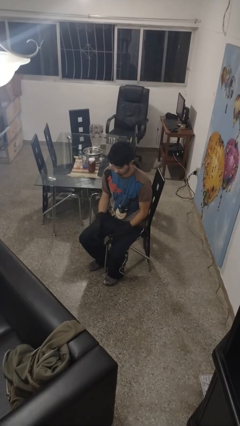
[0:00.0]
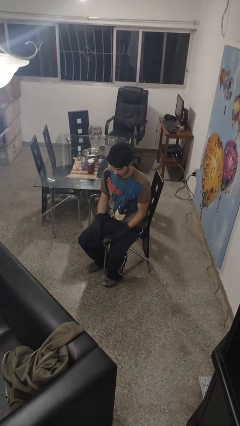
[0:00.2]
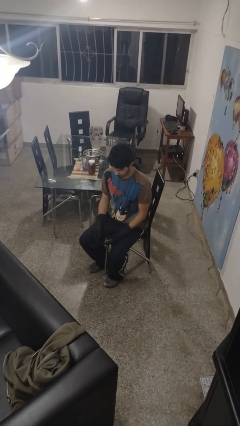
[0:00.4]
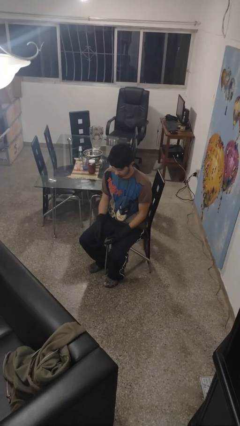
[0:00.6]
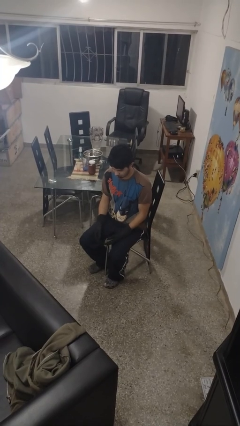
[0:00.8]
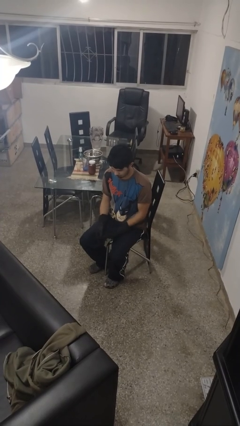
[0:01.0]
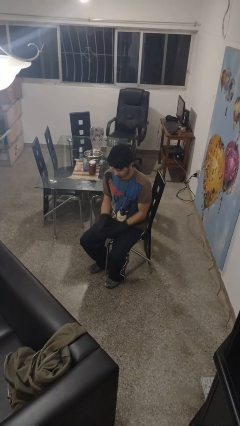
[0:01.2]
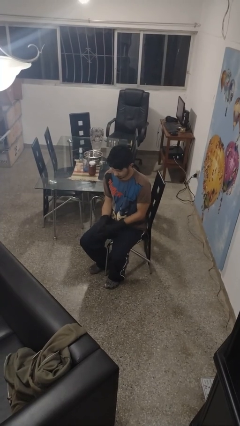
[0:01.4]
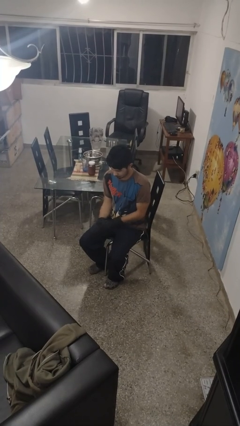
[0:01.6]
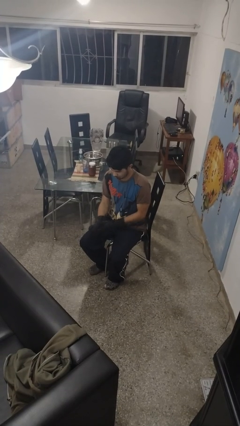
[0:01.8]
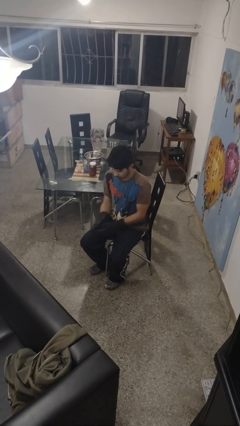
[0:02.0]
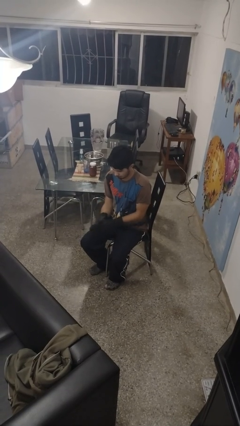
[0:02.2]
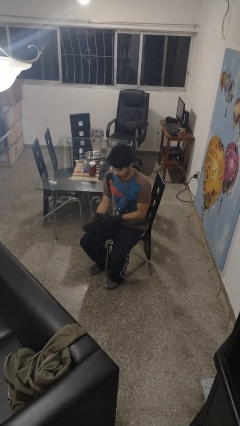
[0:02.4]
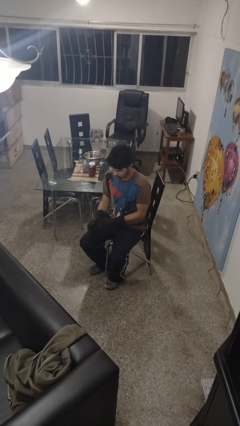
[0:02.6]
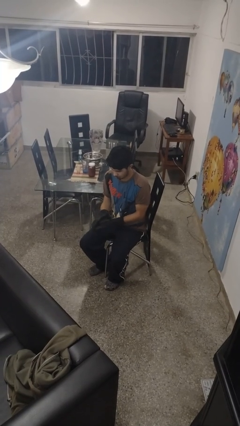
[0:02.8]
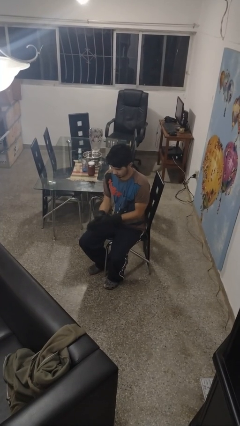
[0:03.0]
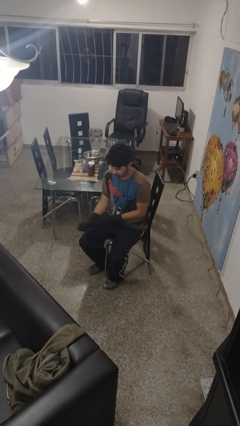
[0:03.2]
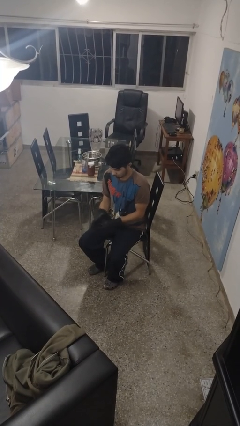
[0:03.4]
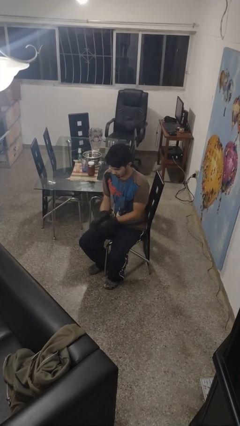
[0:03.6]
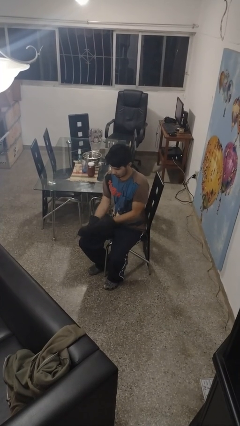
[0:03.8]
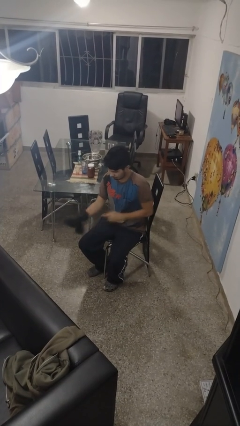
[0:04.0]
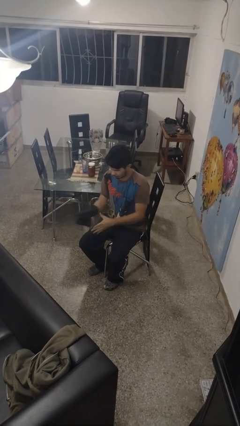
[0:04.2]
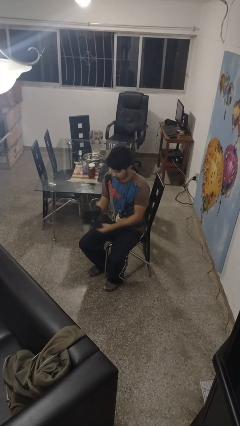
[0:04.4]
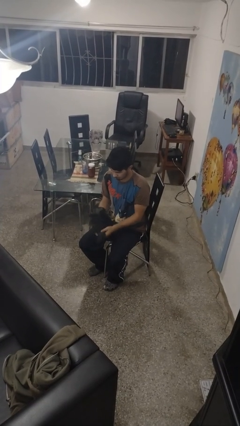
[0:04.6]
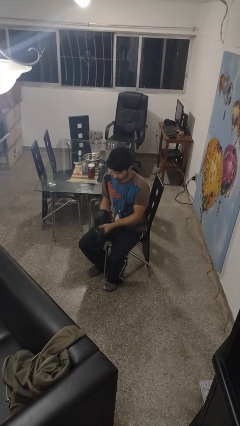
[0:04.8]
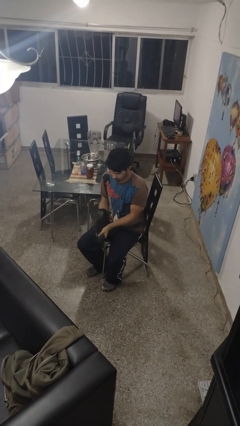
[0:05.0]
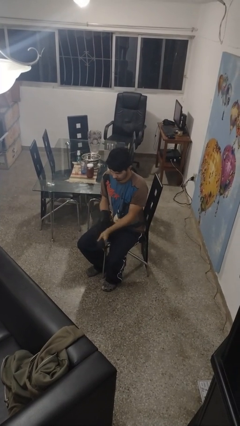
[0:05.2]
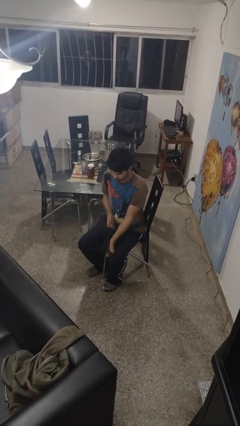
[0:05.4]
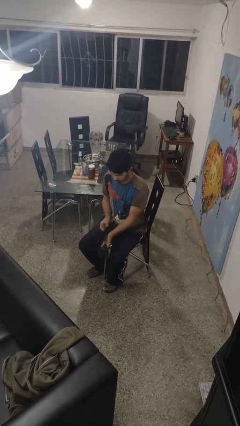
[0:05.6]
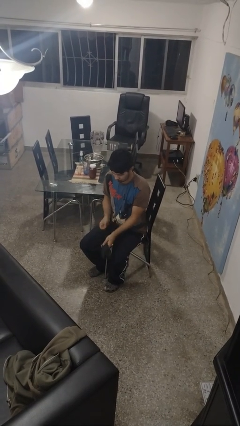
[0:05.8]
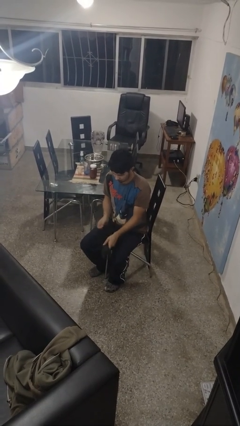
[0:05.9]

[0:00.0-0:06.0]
person takes off gloves

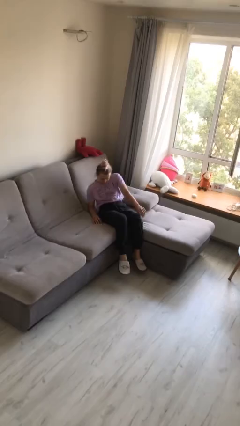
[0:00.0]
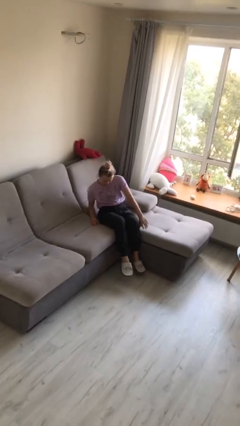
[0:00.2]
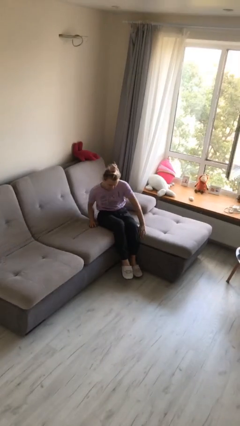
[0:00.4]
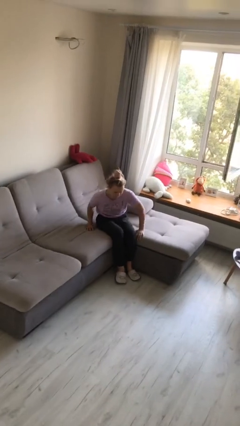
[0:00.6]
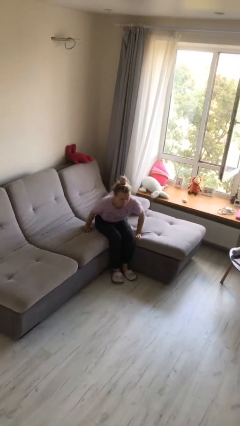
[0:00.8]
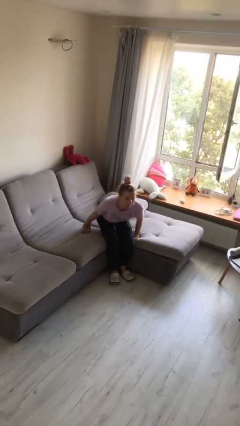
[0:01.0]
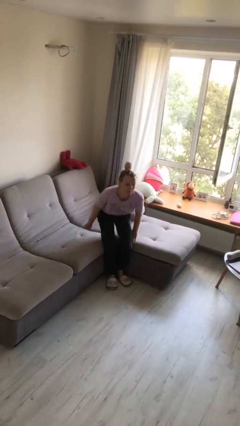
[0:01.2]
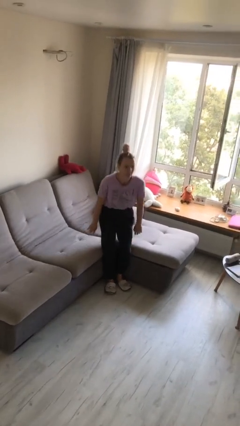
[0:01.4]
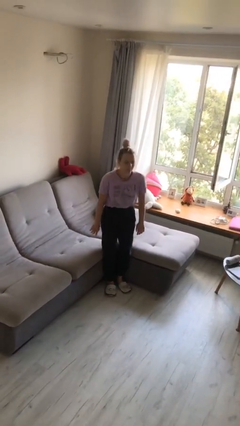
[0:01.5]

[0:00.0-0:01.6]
person stands up

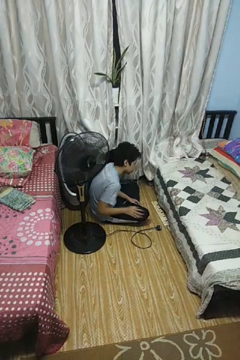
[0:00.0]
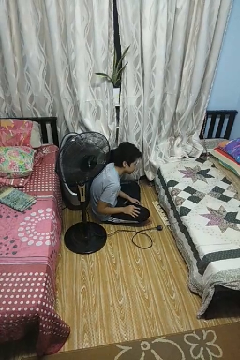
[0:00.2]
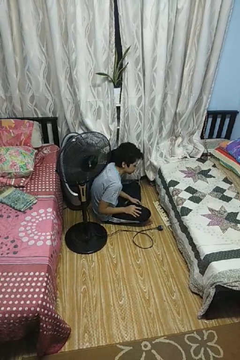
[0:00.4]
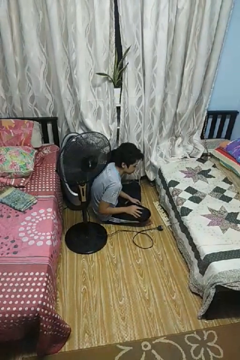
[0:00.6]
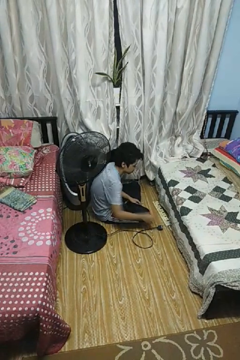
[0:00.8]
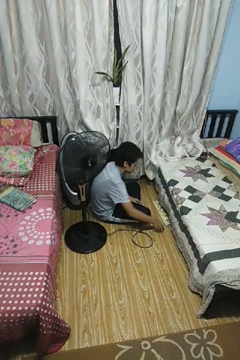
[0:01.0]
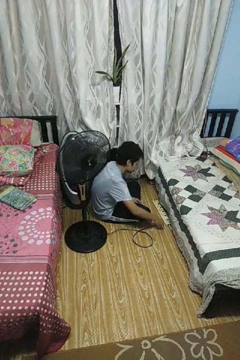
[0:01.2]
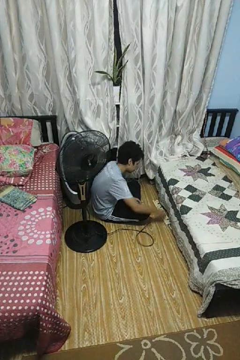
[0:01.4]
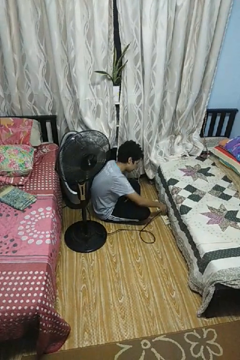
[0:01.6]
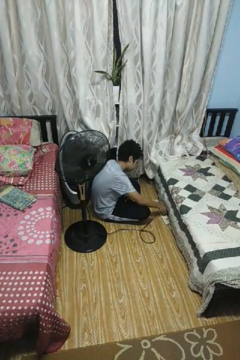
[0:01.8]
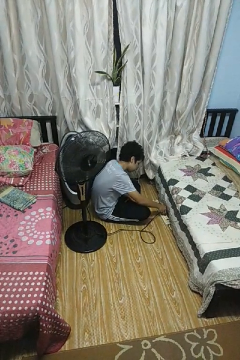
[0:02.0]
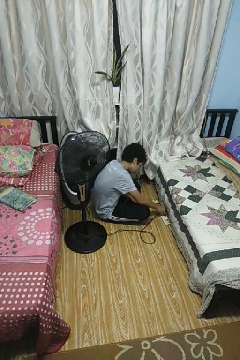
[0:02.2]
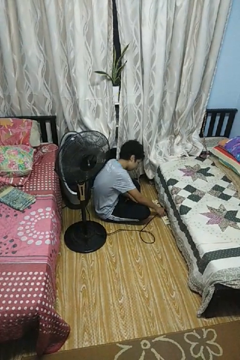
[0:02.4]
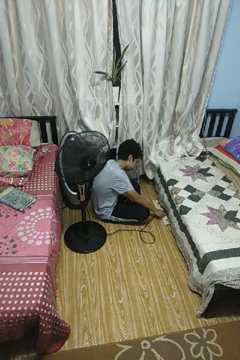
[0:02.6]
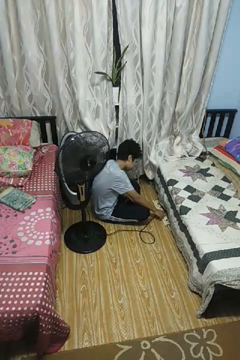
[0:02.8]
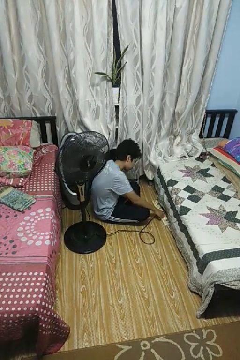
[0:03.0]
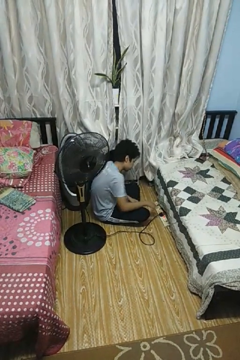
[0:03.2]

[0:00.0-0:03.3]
person plugs into electrical socket

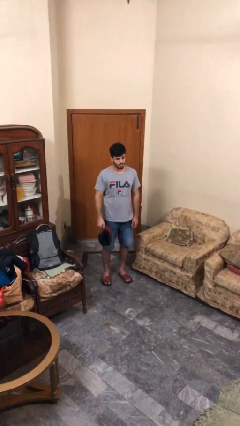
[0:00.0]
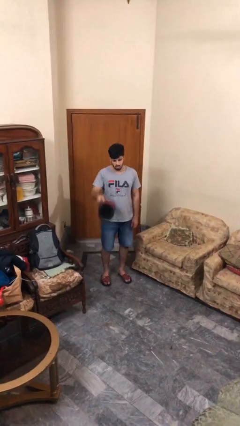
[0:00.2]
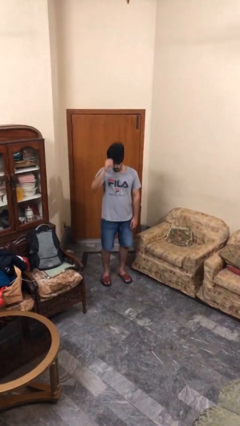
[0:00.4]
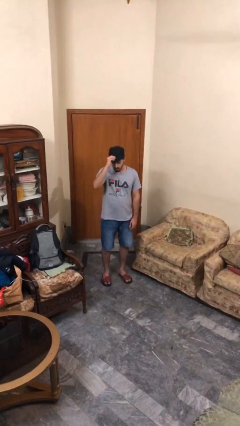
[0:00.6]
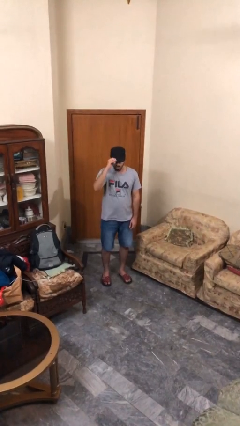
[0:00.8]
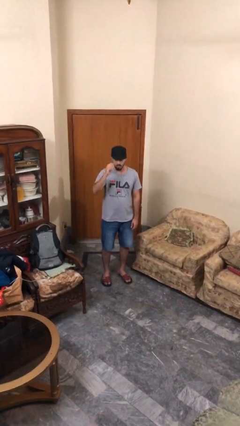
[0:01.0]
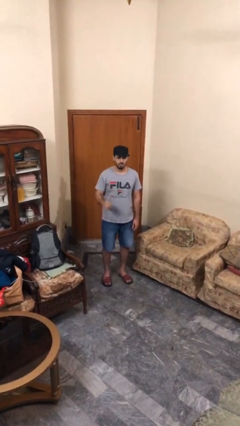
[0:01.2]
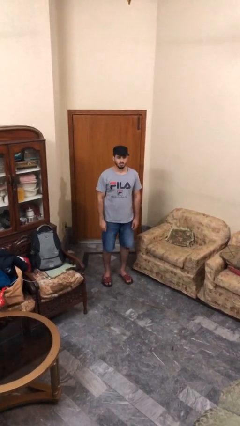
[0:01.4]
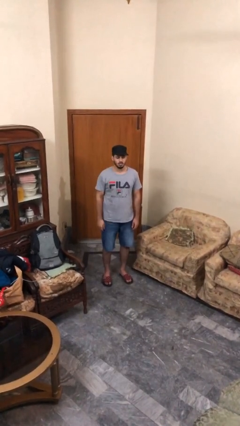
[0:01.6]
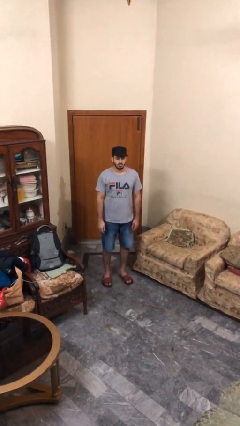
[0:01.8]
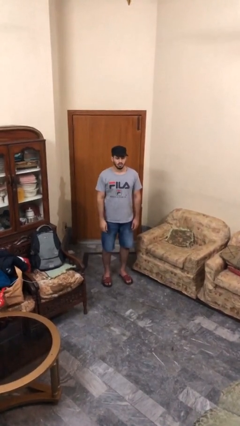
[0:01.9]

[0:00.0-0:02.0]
person puts on hat

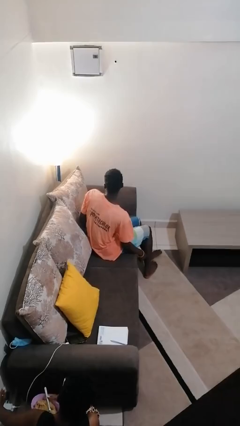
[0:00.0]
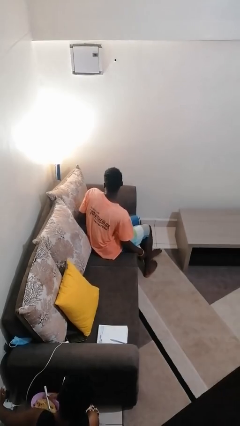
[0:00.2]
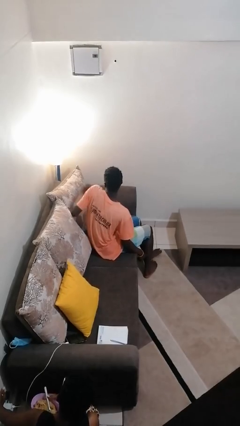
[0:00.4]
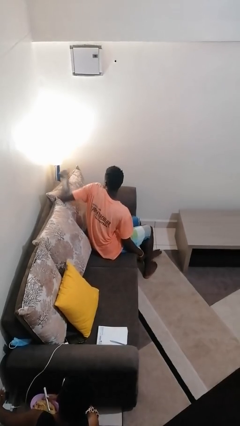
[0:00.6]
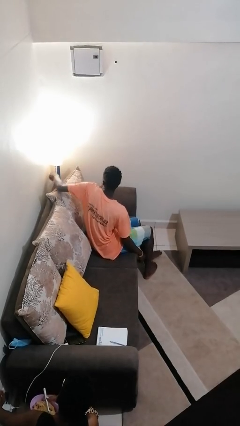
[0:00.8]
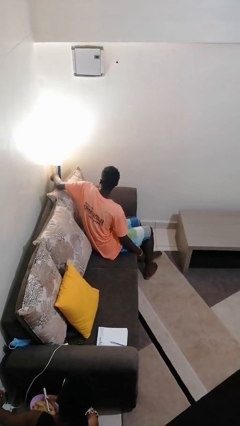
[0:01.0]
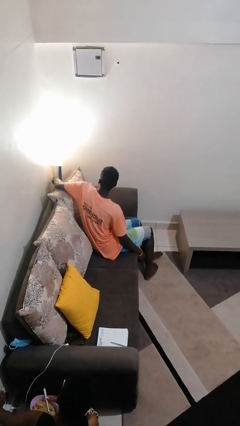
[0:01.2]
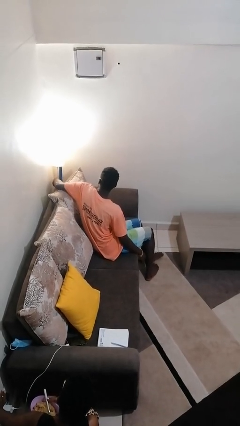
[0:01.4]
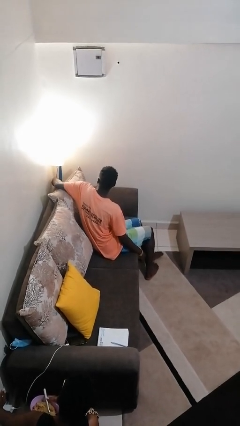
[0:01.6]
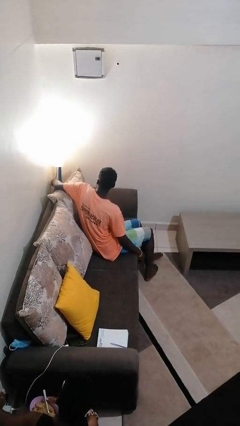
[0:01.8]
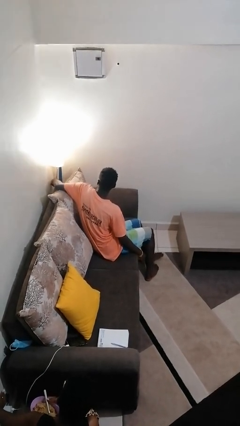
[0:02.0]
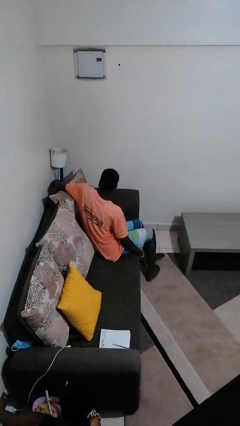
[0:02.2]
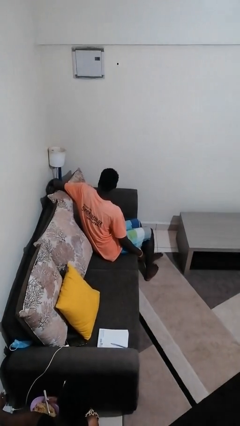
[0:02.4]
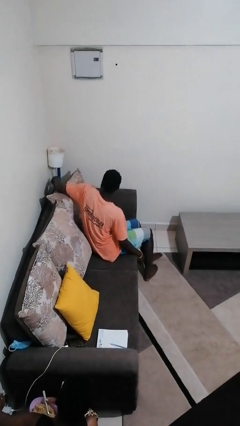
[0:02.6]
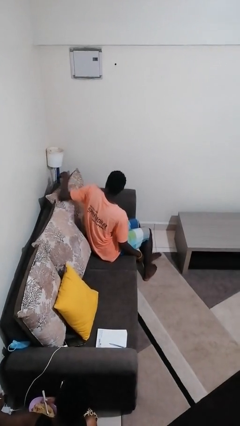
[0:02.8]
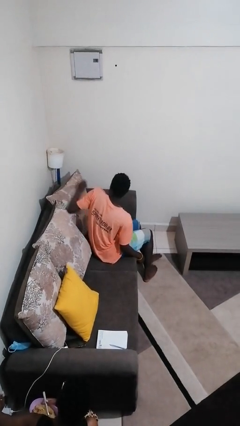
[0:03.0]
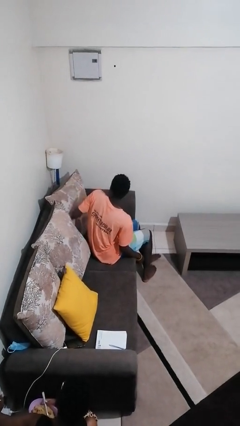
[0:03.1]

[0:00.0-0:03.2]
person turns off lamp

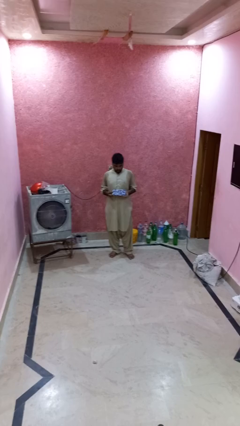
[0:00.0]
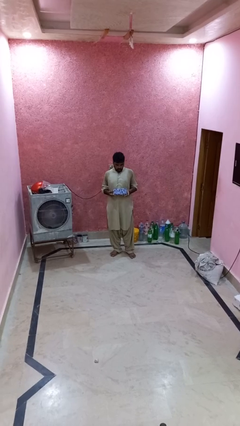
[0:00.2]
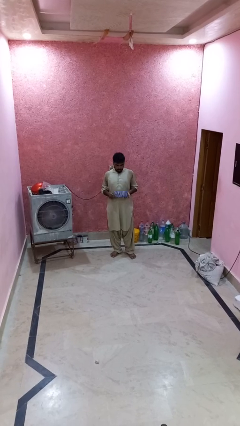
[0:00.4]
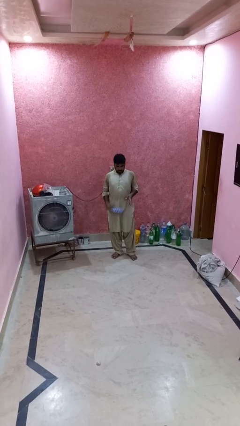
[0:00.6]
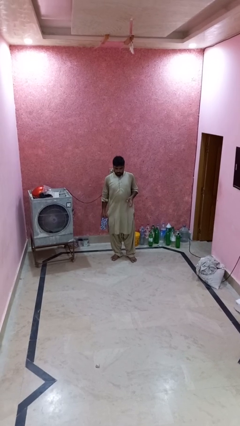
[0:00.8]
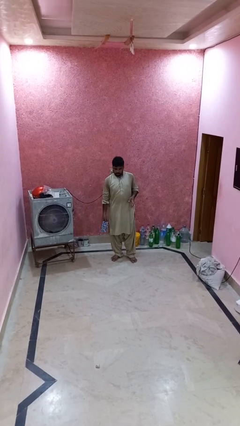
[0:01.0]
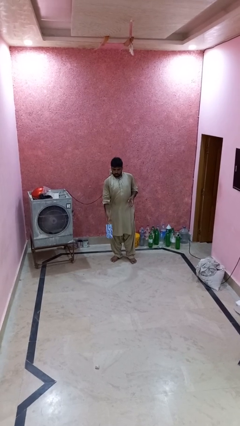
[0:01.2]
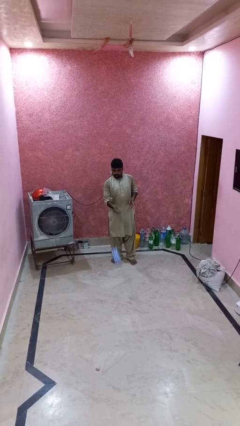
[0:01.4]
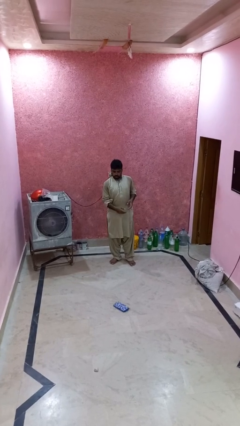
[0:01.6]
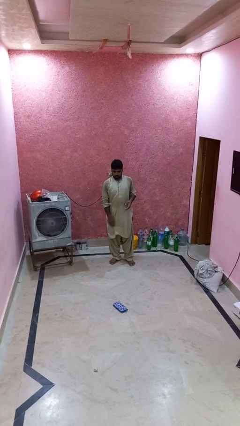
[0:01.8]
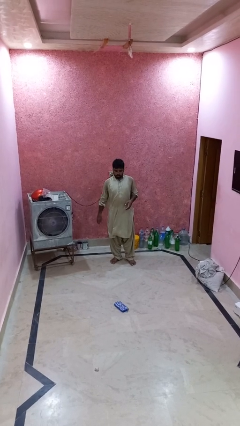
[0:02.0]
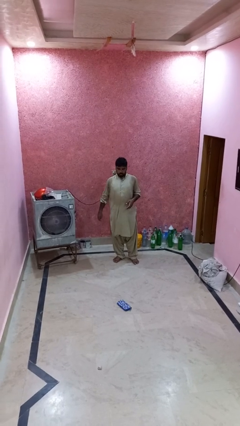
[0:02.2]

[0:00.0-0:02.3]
person throws object to ground
